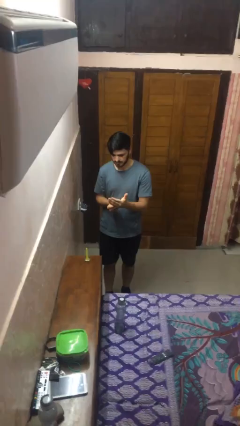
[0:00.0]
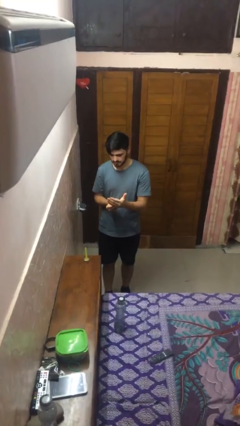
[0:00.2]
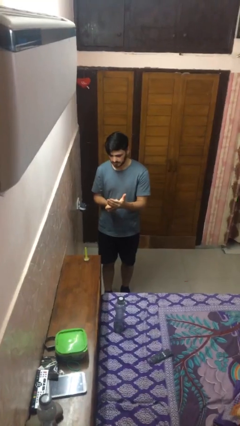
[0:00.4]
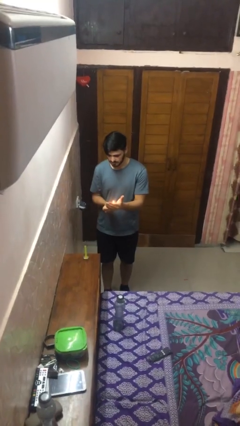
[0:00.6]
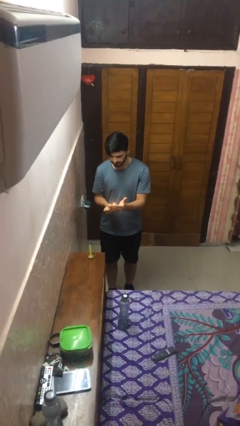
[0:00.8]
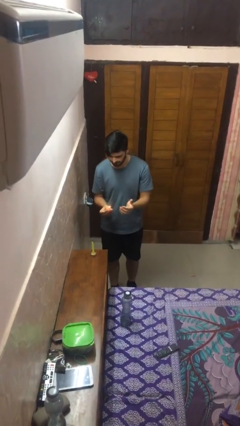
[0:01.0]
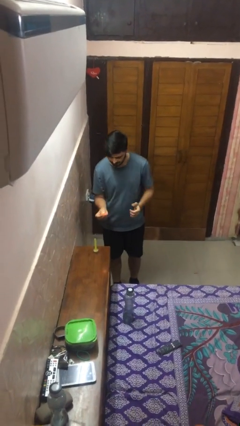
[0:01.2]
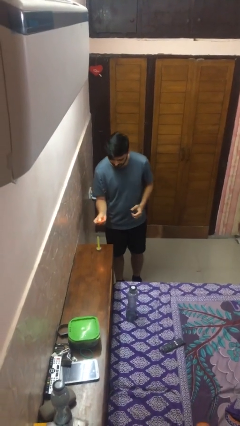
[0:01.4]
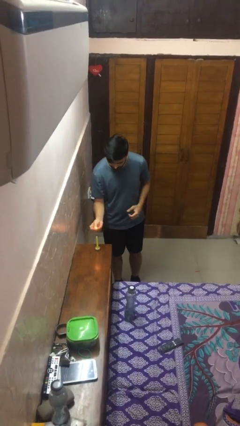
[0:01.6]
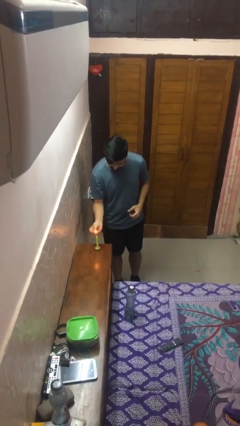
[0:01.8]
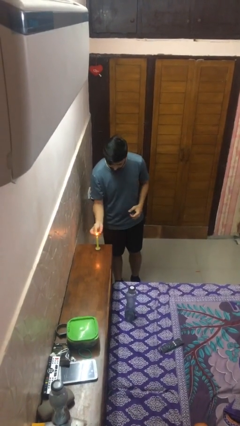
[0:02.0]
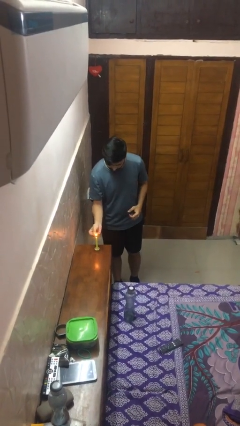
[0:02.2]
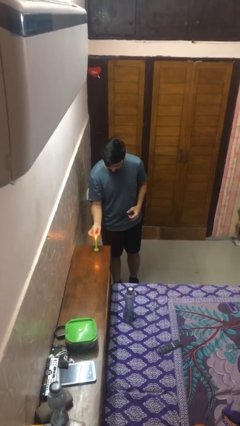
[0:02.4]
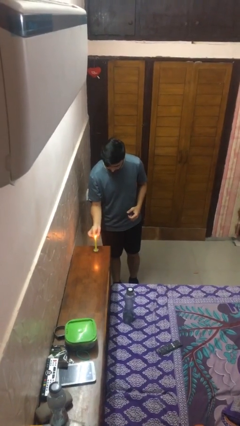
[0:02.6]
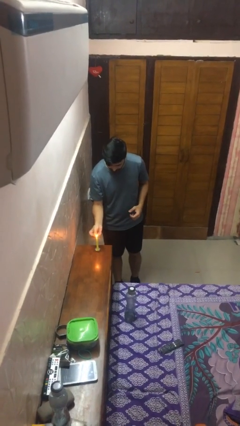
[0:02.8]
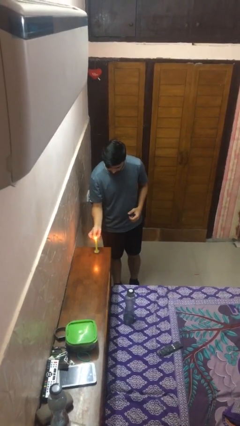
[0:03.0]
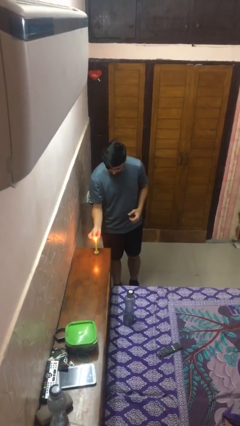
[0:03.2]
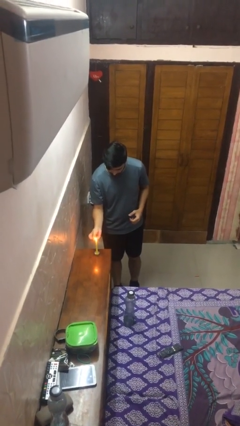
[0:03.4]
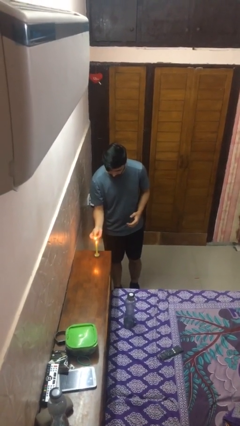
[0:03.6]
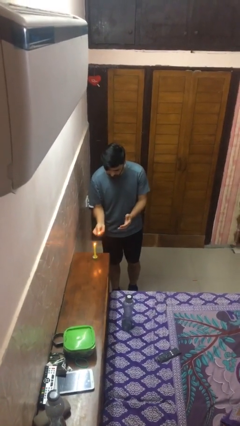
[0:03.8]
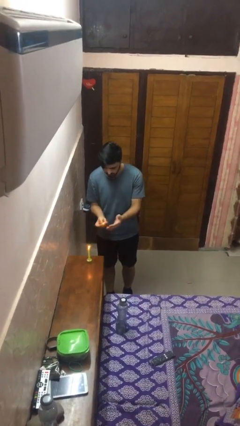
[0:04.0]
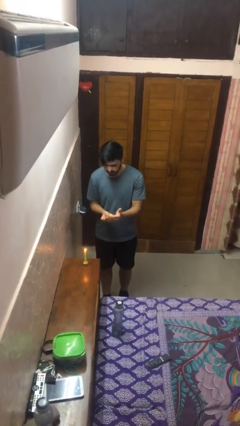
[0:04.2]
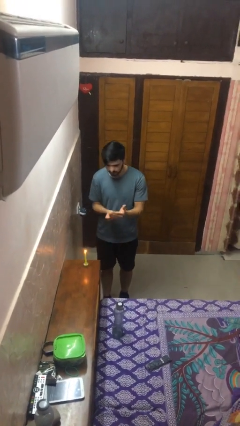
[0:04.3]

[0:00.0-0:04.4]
person lights candle

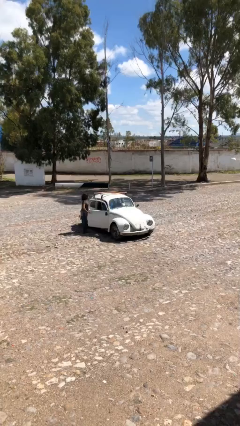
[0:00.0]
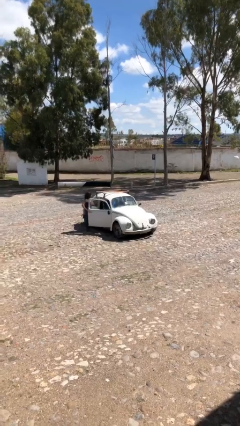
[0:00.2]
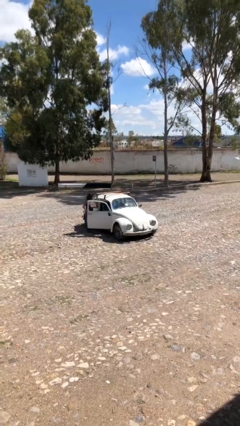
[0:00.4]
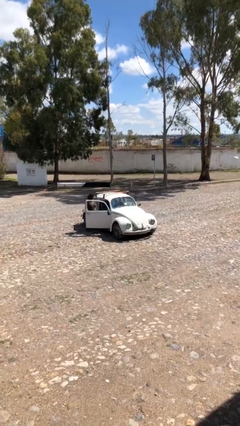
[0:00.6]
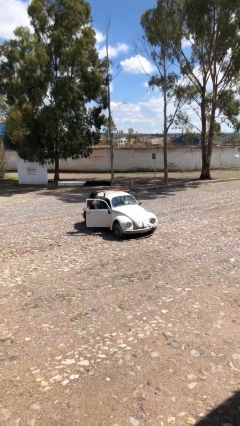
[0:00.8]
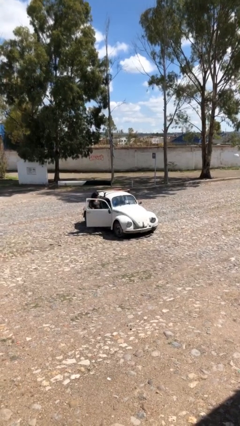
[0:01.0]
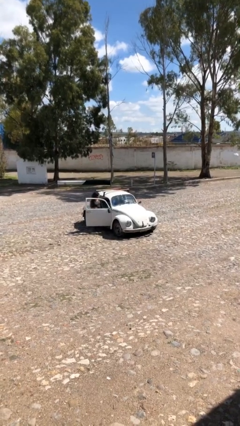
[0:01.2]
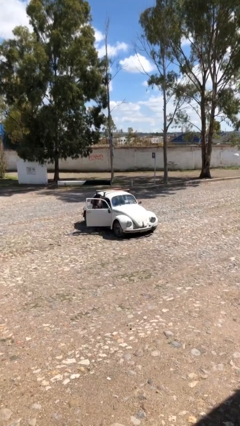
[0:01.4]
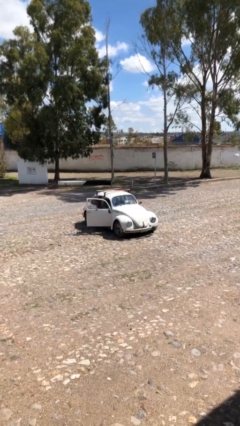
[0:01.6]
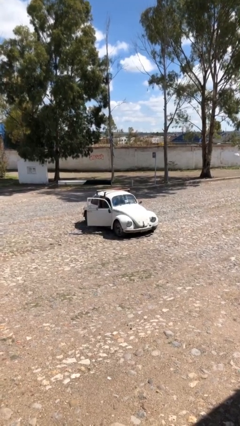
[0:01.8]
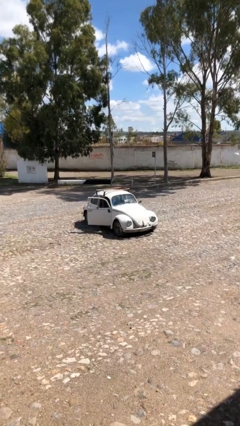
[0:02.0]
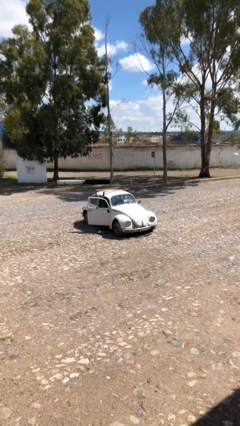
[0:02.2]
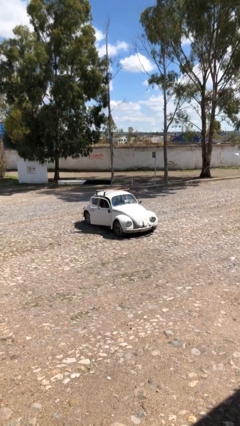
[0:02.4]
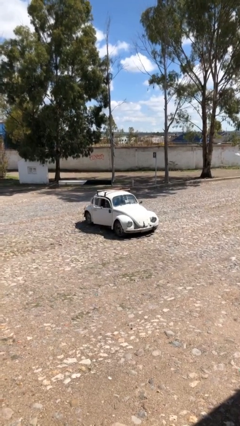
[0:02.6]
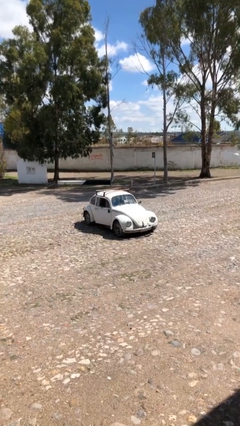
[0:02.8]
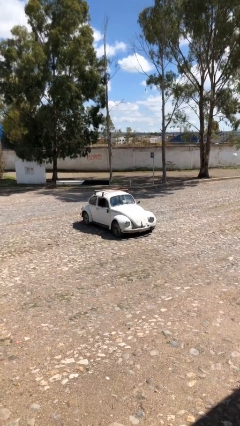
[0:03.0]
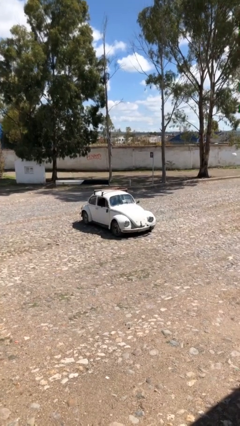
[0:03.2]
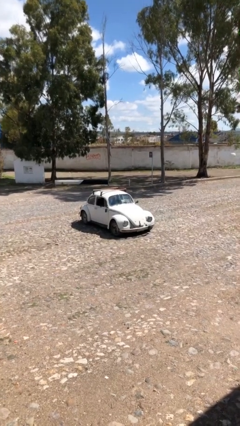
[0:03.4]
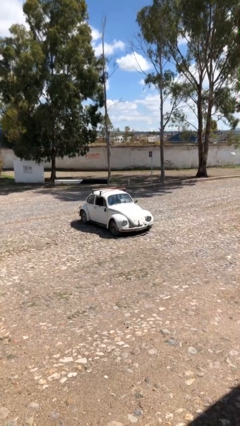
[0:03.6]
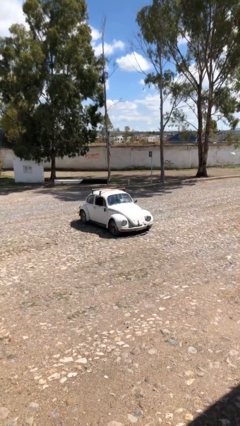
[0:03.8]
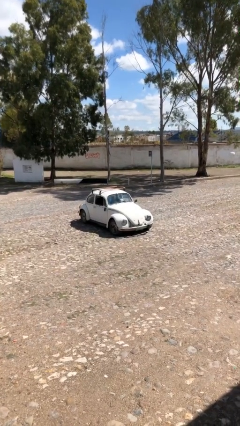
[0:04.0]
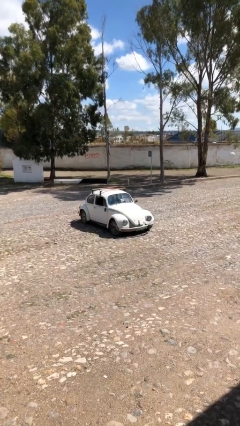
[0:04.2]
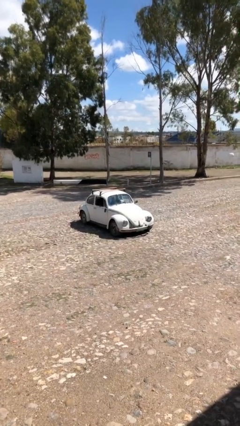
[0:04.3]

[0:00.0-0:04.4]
car picks up person

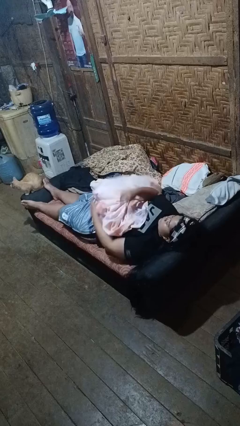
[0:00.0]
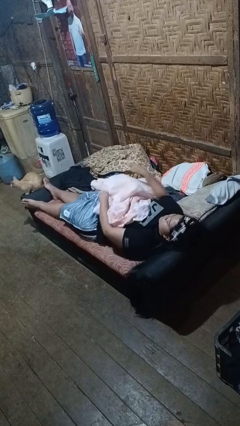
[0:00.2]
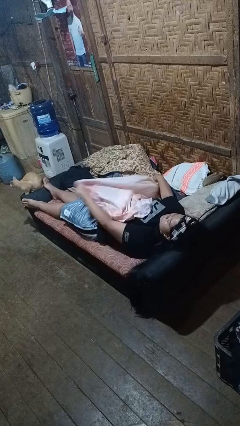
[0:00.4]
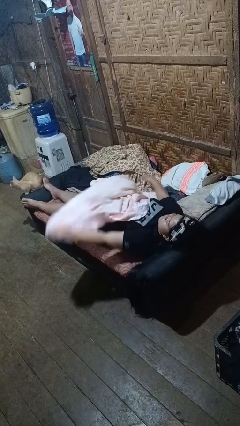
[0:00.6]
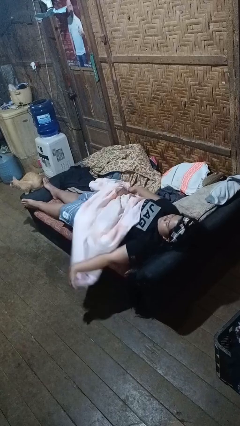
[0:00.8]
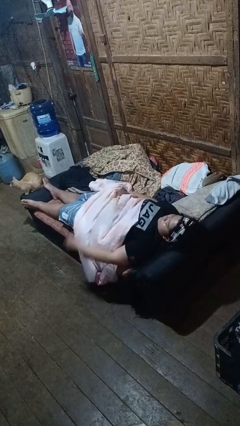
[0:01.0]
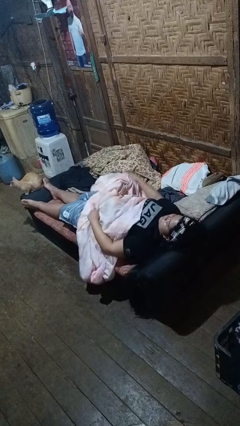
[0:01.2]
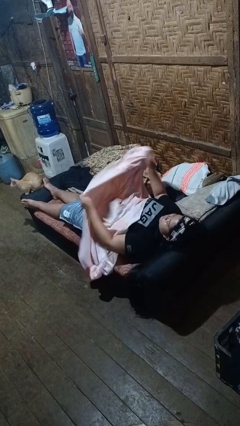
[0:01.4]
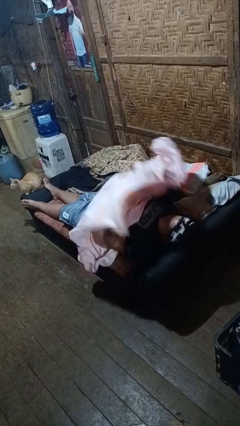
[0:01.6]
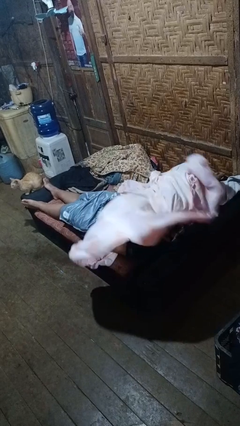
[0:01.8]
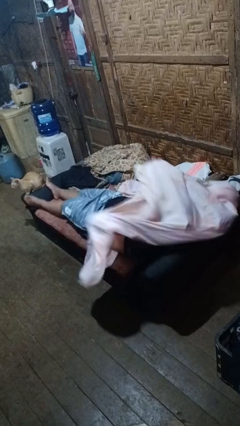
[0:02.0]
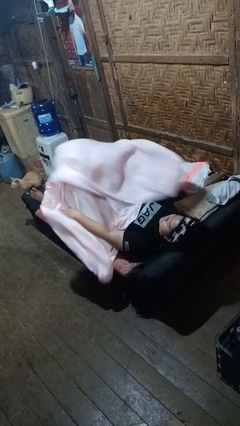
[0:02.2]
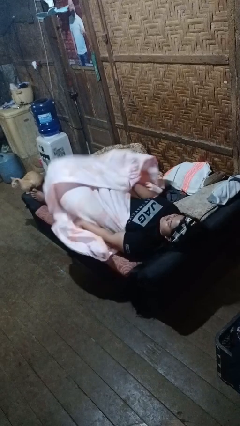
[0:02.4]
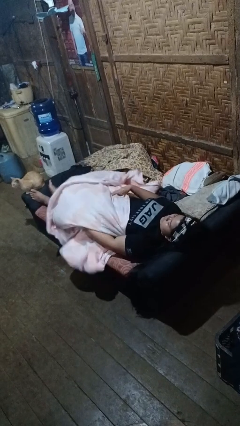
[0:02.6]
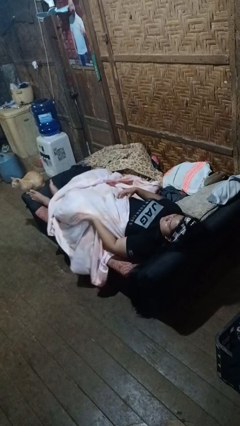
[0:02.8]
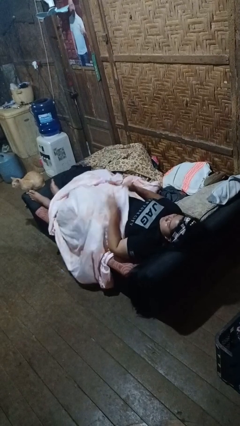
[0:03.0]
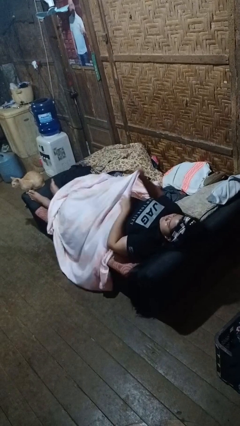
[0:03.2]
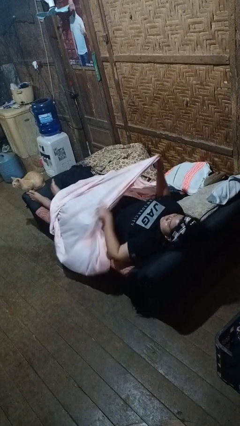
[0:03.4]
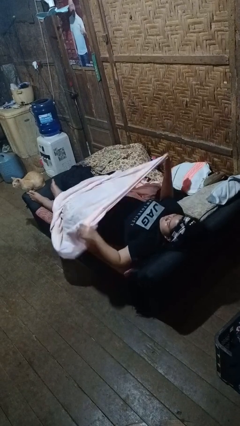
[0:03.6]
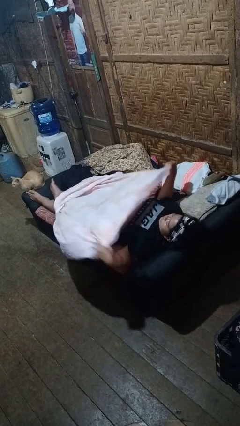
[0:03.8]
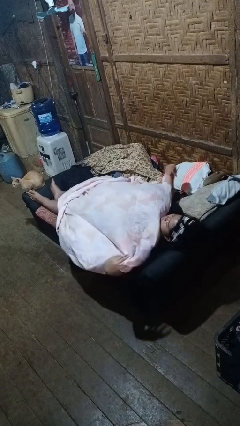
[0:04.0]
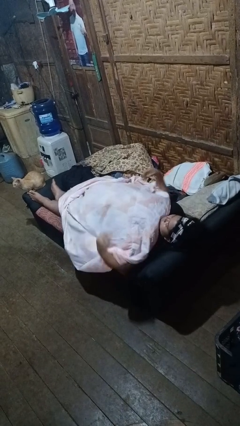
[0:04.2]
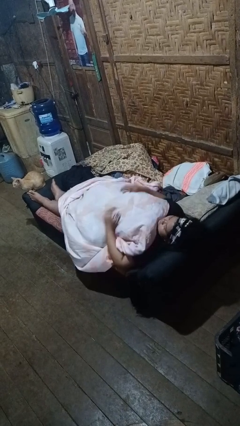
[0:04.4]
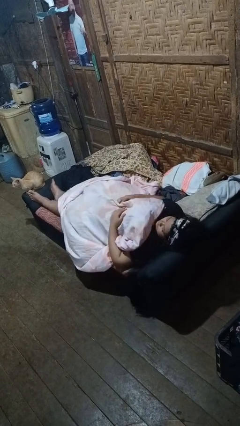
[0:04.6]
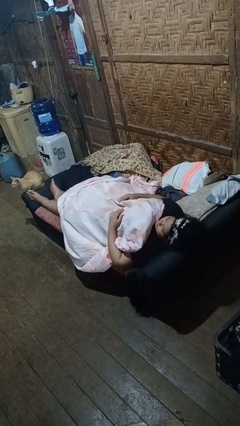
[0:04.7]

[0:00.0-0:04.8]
person covers with bedsheets

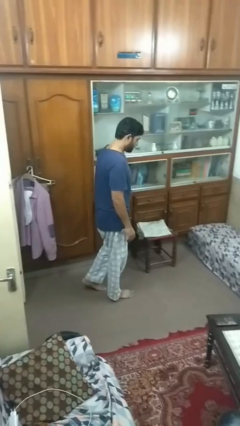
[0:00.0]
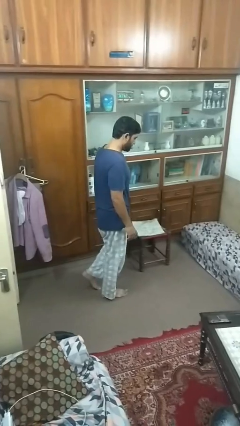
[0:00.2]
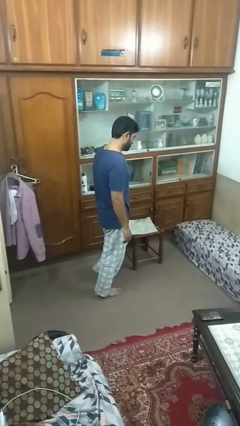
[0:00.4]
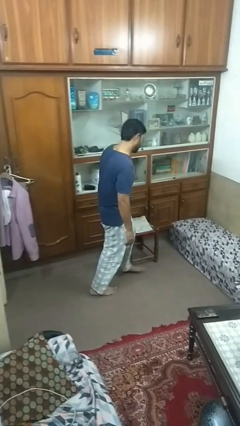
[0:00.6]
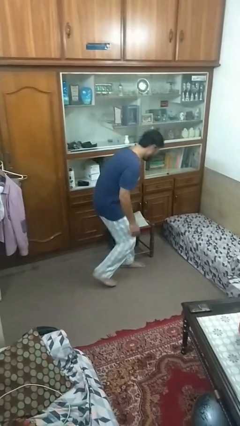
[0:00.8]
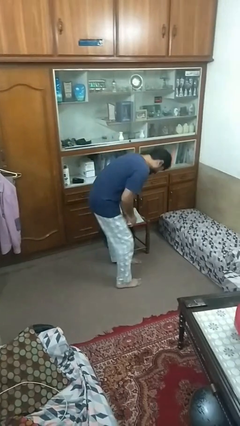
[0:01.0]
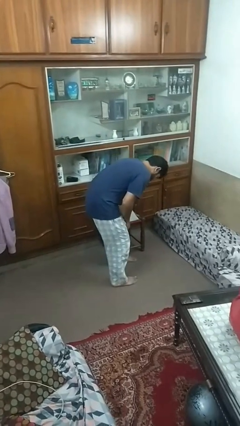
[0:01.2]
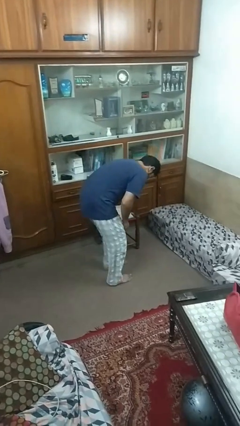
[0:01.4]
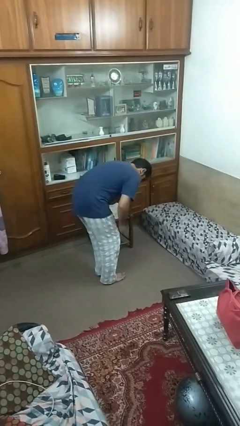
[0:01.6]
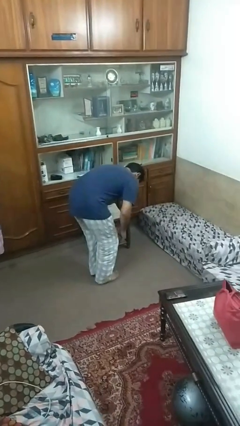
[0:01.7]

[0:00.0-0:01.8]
person trips on object on floor

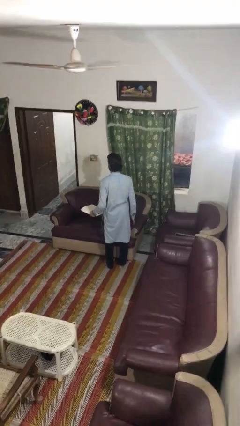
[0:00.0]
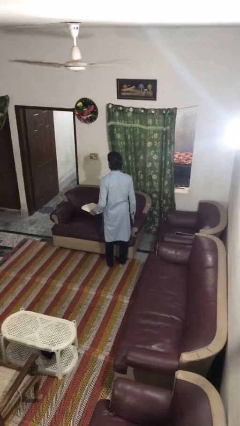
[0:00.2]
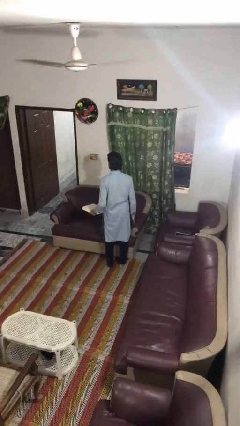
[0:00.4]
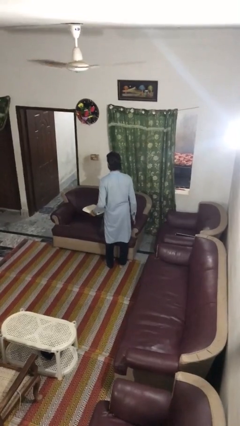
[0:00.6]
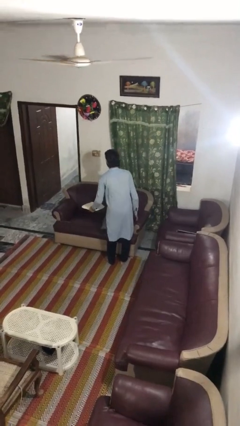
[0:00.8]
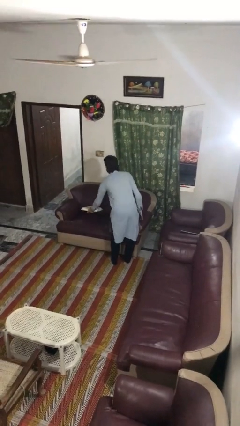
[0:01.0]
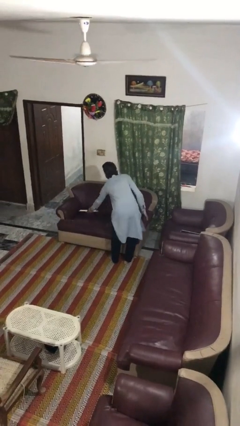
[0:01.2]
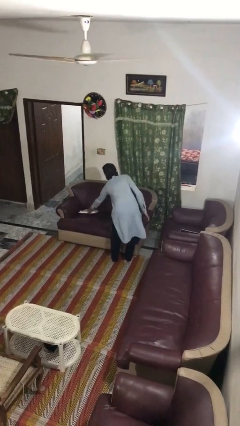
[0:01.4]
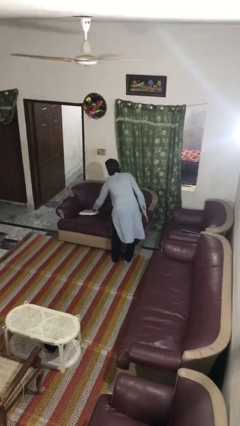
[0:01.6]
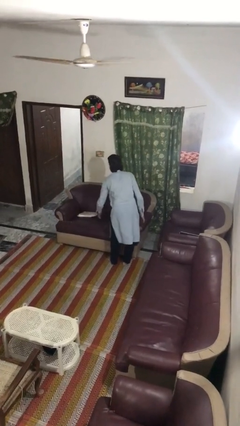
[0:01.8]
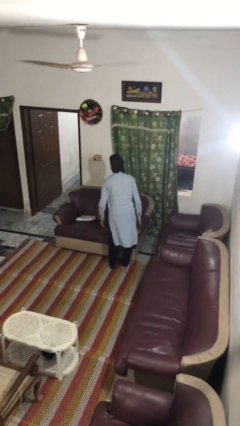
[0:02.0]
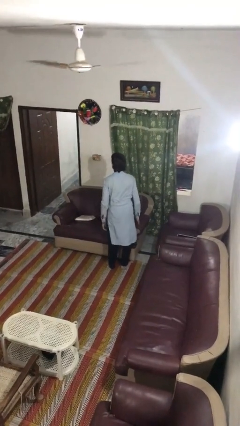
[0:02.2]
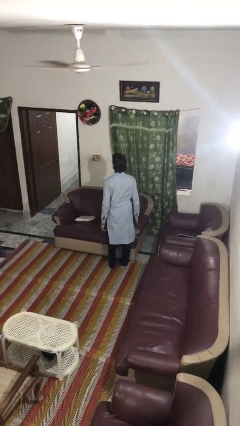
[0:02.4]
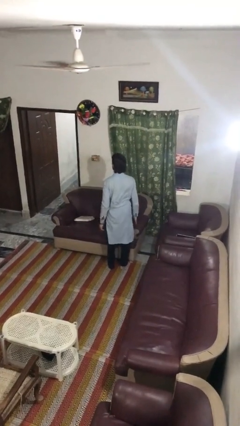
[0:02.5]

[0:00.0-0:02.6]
person puts down object on couch
